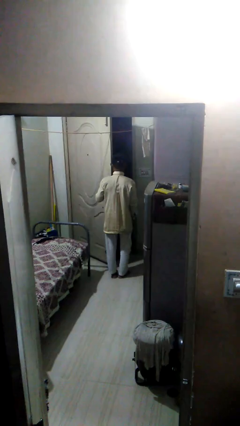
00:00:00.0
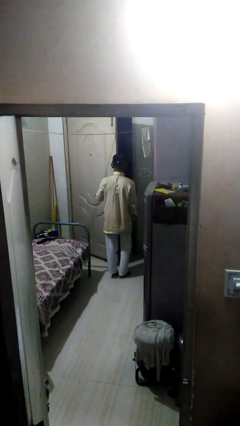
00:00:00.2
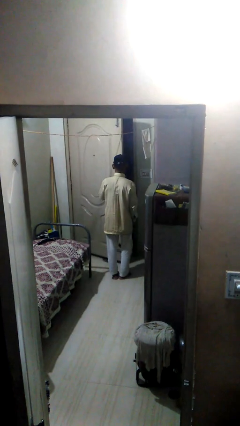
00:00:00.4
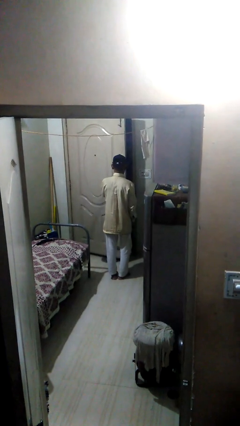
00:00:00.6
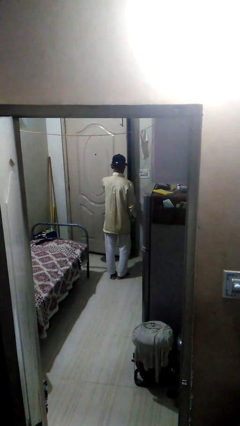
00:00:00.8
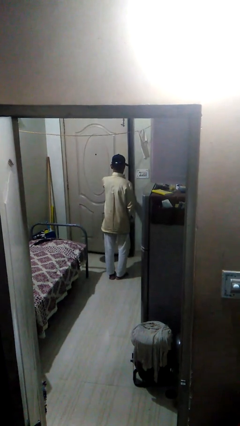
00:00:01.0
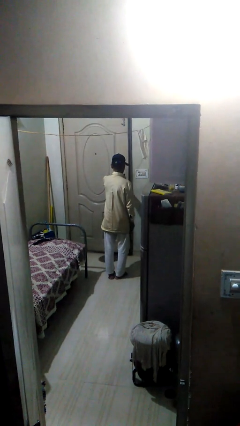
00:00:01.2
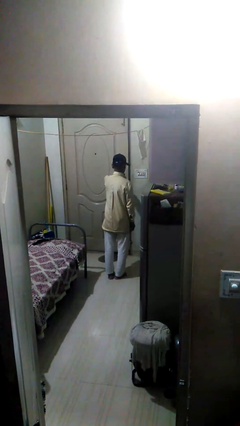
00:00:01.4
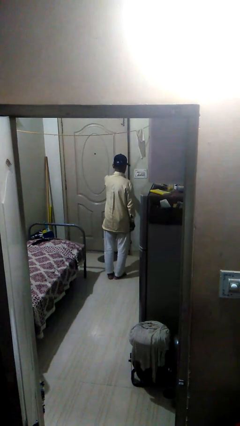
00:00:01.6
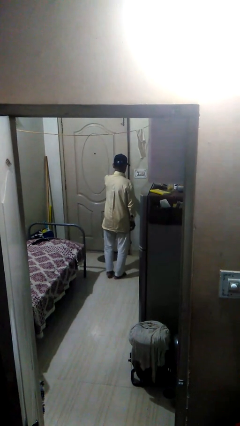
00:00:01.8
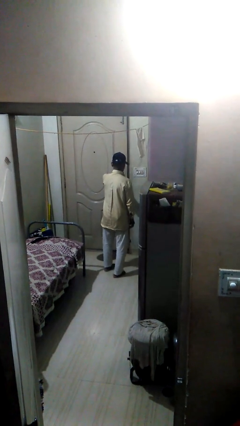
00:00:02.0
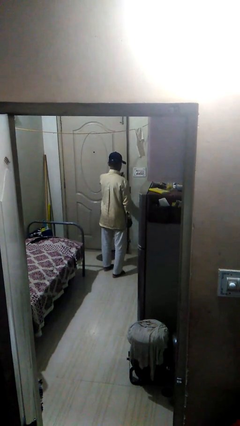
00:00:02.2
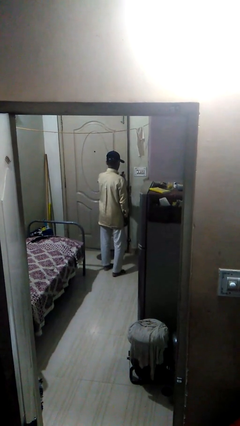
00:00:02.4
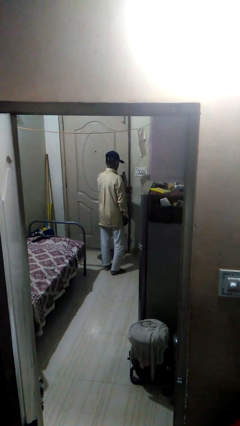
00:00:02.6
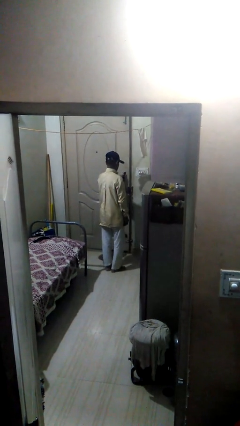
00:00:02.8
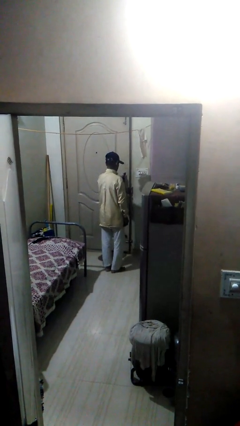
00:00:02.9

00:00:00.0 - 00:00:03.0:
person closes facility door

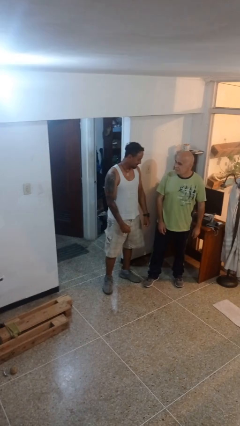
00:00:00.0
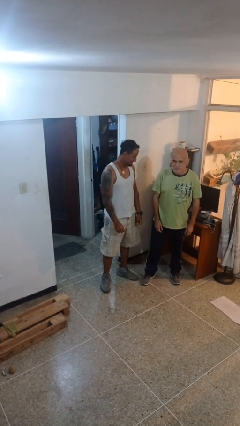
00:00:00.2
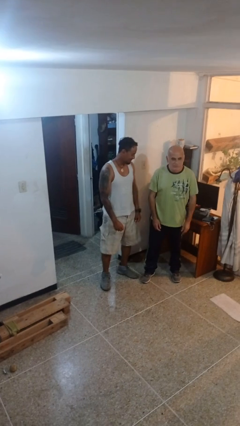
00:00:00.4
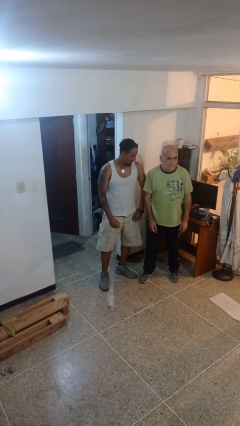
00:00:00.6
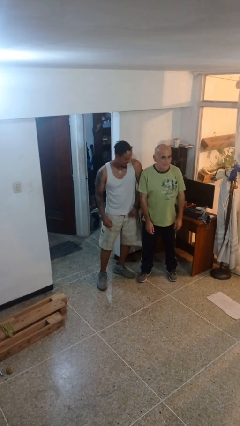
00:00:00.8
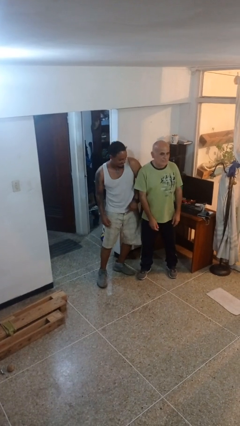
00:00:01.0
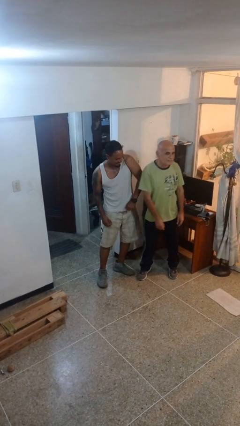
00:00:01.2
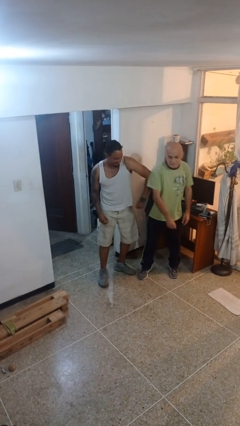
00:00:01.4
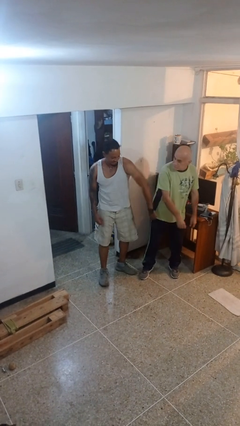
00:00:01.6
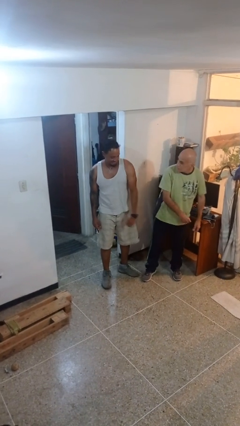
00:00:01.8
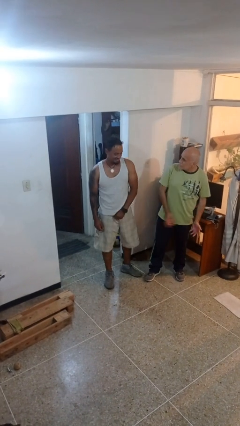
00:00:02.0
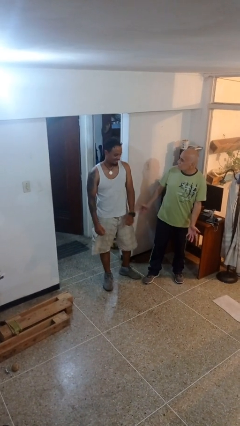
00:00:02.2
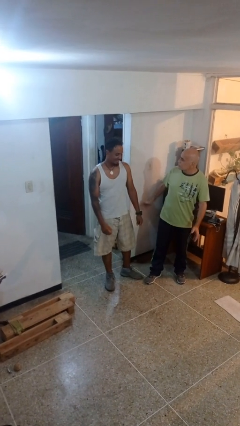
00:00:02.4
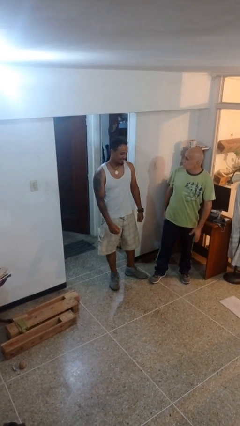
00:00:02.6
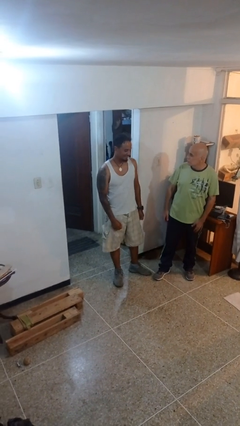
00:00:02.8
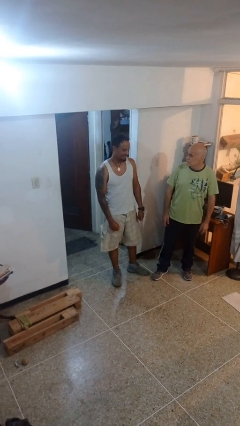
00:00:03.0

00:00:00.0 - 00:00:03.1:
person nudges person with elbow

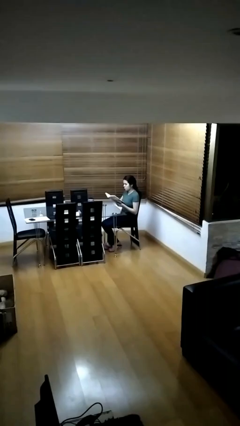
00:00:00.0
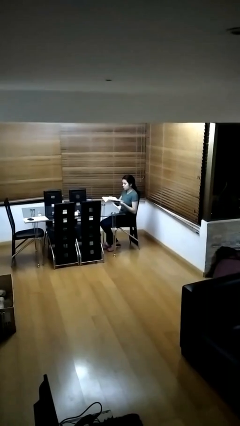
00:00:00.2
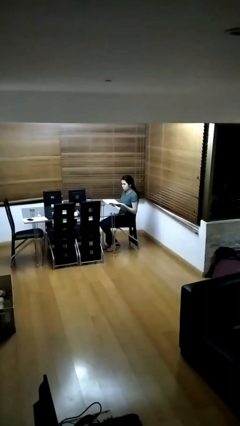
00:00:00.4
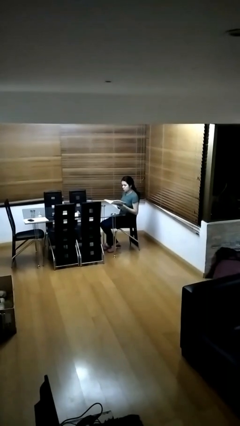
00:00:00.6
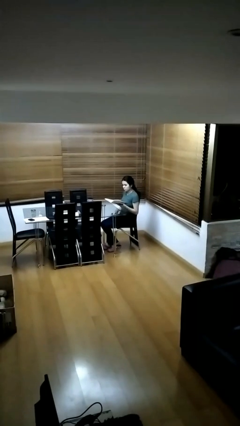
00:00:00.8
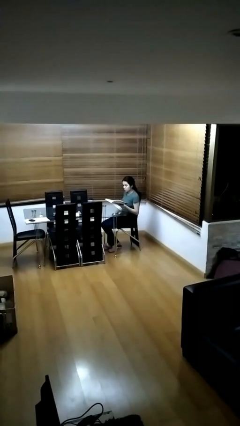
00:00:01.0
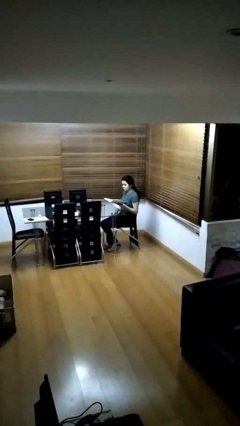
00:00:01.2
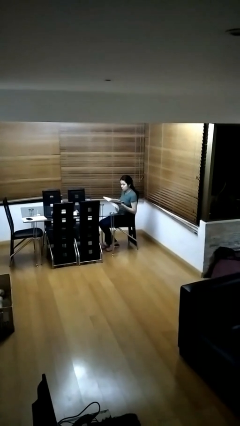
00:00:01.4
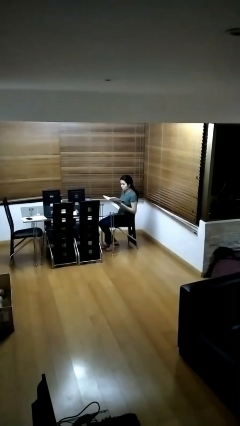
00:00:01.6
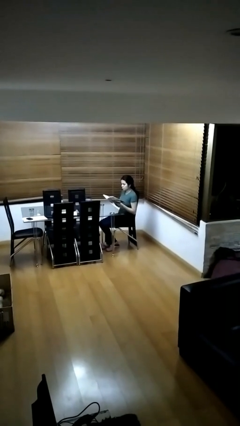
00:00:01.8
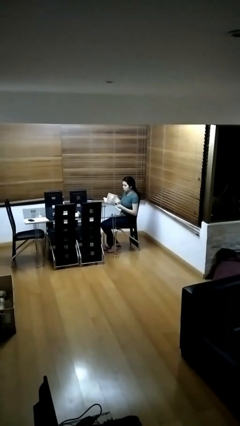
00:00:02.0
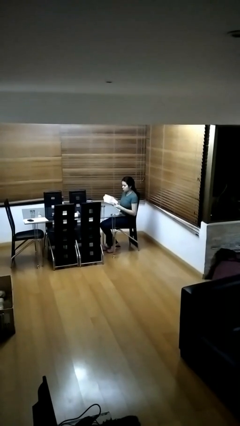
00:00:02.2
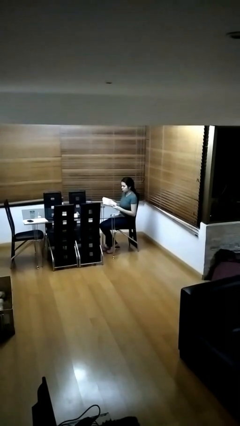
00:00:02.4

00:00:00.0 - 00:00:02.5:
person reads document

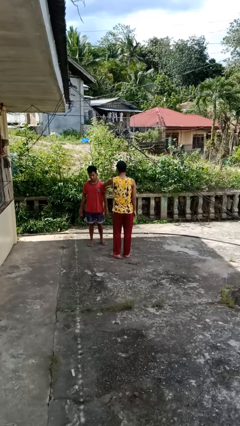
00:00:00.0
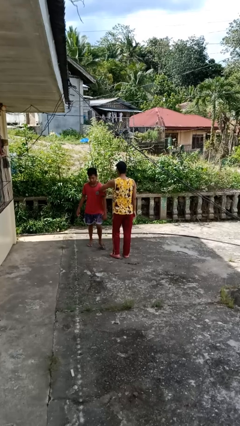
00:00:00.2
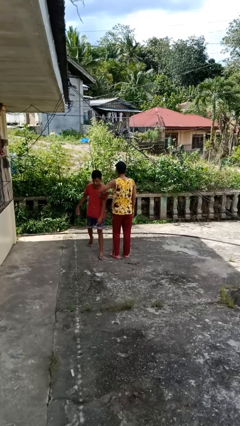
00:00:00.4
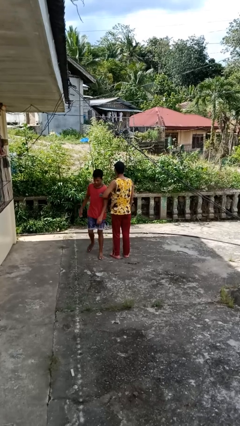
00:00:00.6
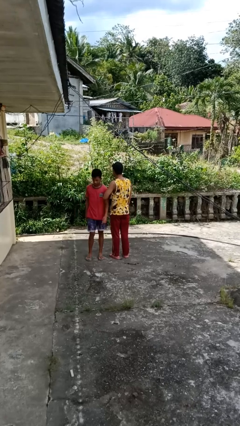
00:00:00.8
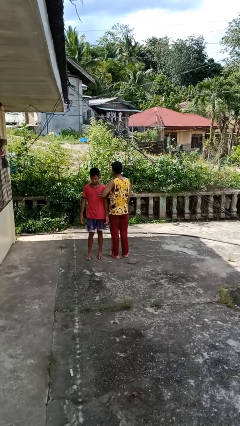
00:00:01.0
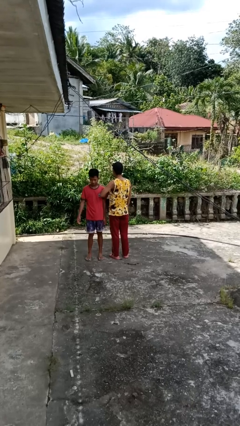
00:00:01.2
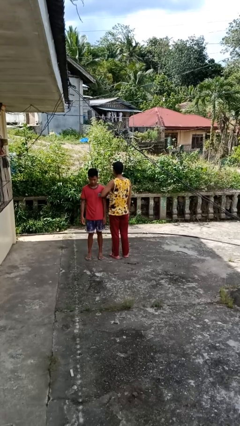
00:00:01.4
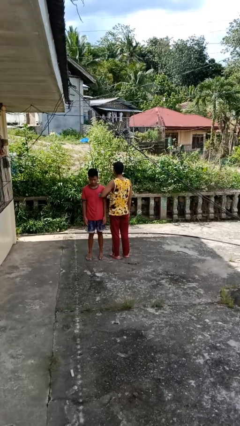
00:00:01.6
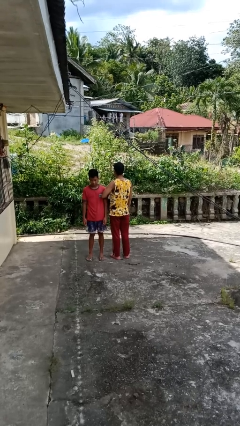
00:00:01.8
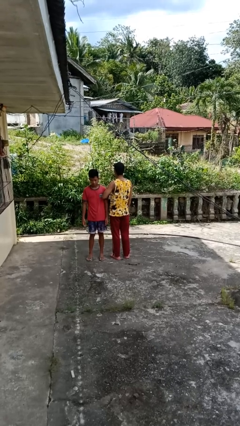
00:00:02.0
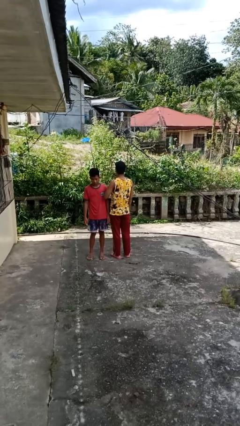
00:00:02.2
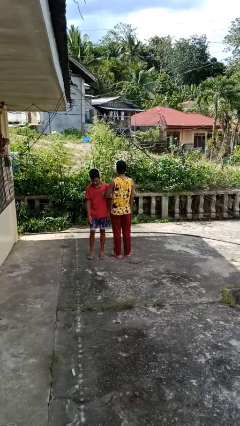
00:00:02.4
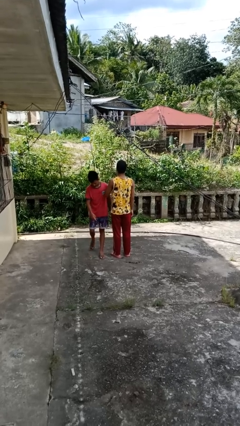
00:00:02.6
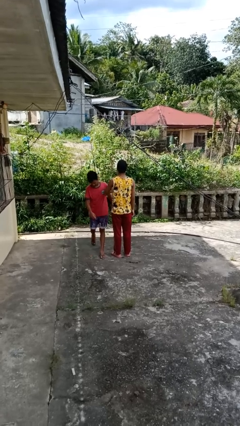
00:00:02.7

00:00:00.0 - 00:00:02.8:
person grabs person by bicep

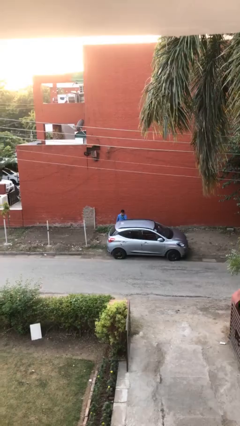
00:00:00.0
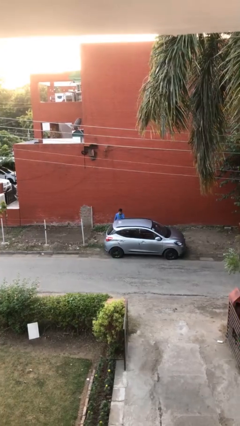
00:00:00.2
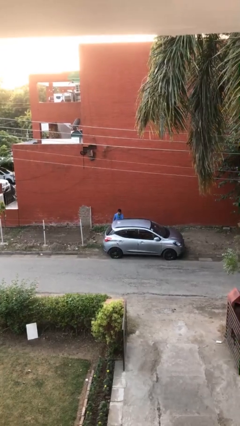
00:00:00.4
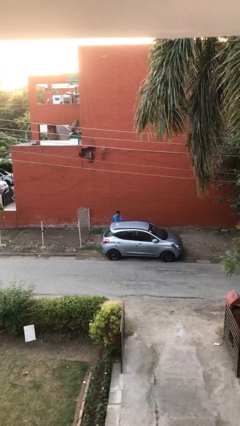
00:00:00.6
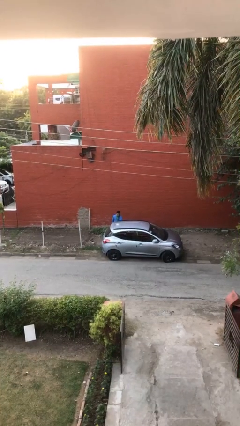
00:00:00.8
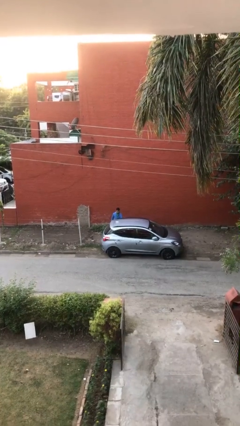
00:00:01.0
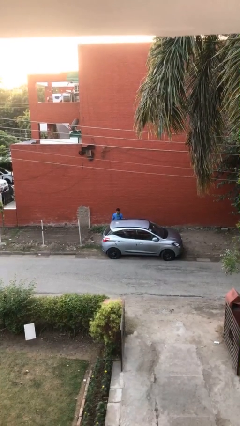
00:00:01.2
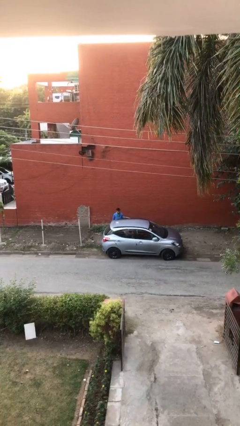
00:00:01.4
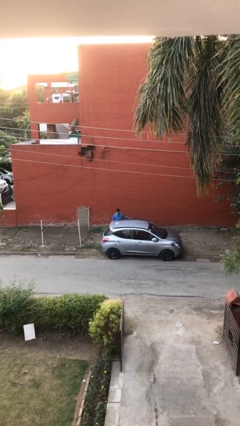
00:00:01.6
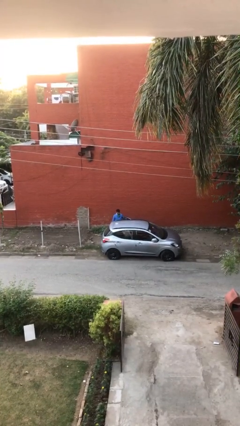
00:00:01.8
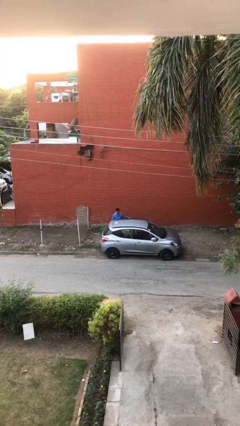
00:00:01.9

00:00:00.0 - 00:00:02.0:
person opens car door

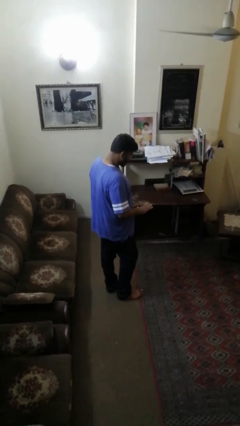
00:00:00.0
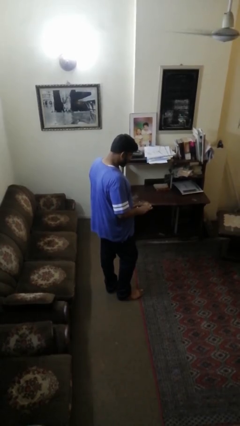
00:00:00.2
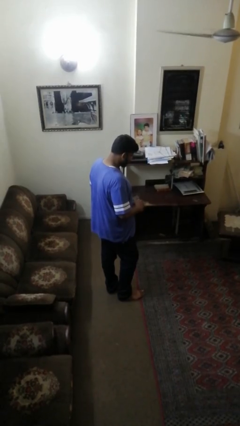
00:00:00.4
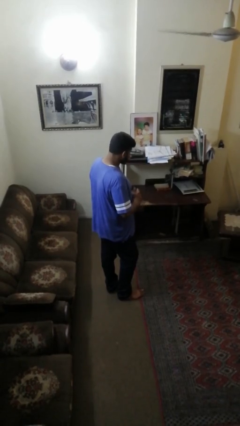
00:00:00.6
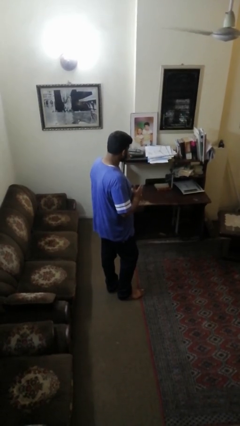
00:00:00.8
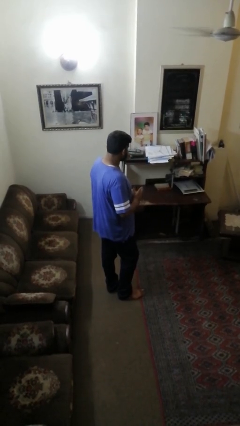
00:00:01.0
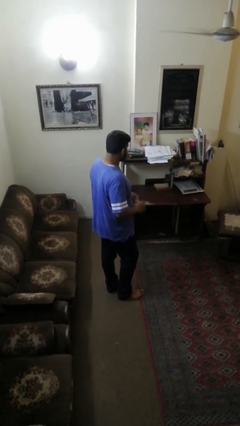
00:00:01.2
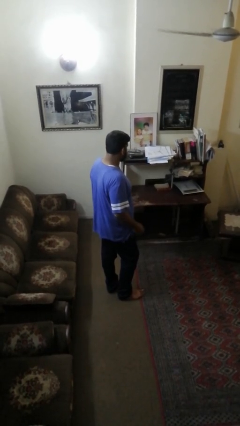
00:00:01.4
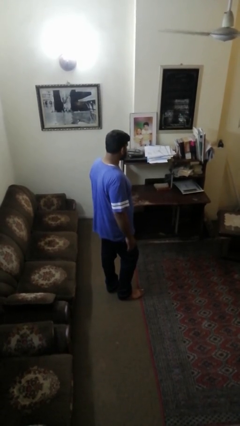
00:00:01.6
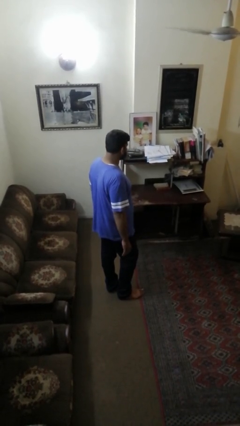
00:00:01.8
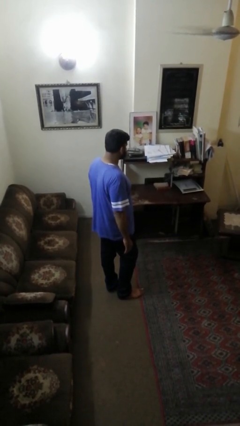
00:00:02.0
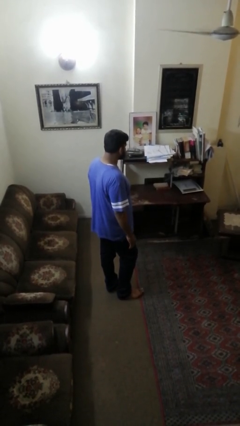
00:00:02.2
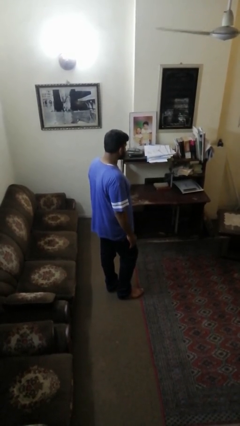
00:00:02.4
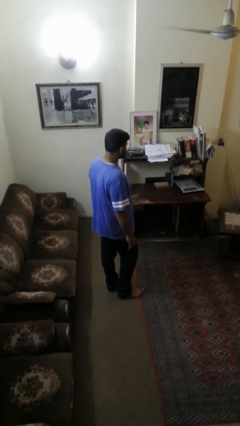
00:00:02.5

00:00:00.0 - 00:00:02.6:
person takes off ring

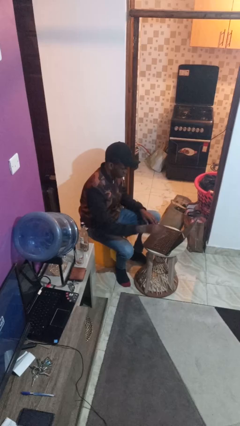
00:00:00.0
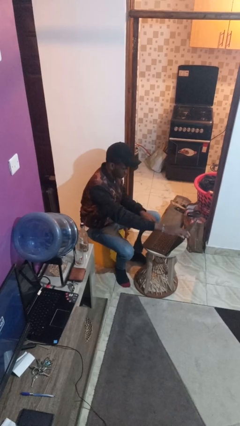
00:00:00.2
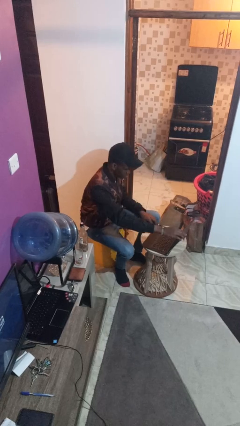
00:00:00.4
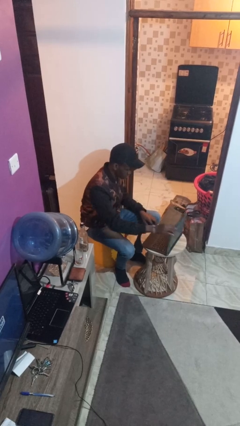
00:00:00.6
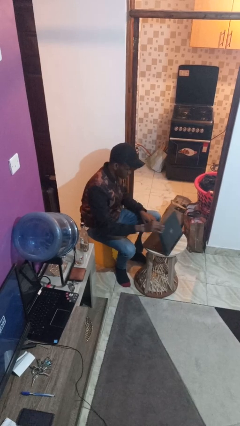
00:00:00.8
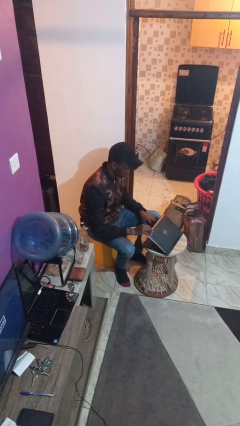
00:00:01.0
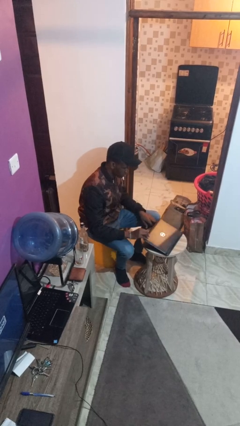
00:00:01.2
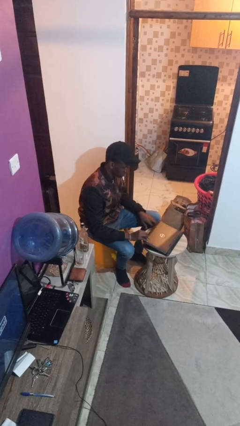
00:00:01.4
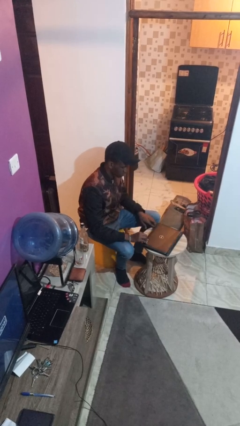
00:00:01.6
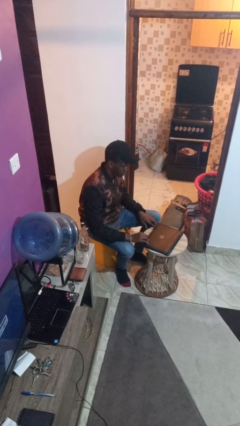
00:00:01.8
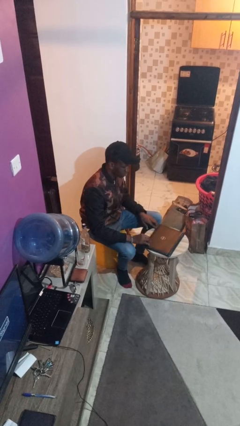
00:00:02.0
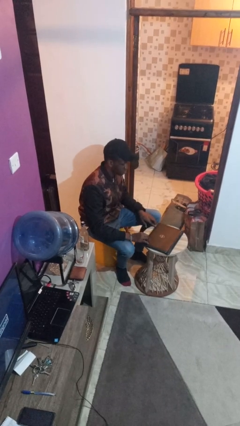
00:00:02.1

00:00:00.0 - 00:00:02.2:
person closes laptop
